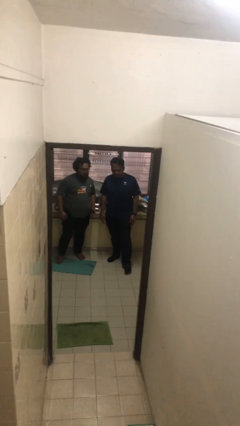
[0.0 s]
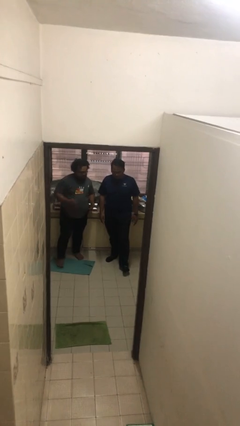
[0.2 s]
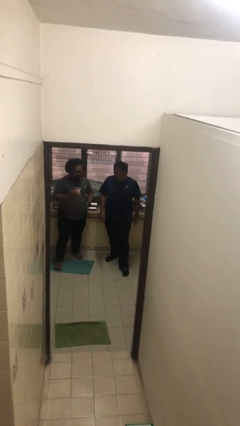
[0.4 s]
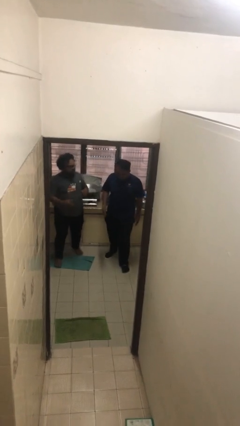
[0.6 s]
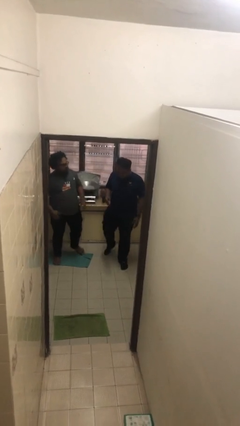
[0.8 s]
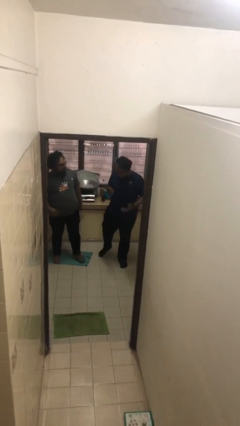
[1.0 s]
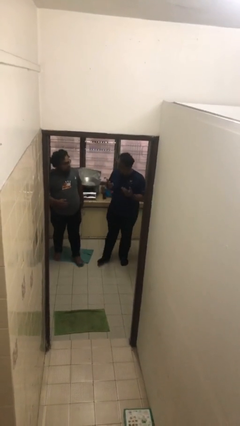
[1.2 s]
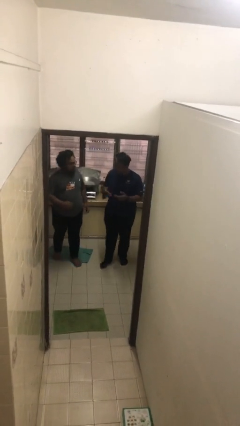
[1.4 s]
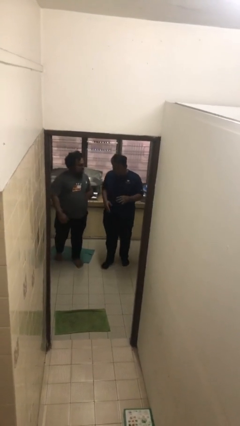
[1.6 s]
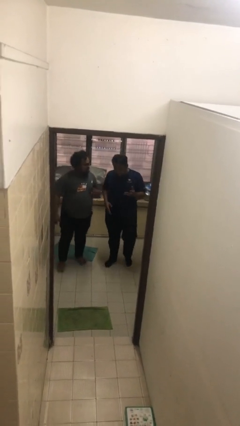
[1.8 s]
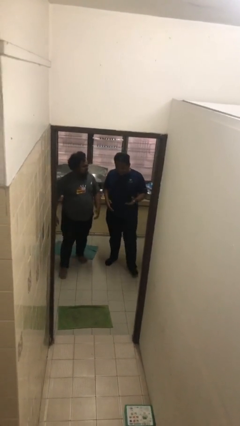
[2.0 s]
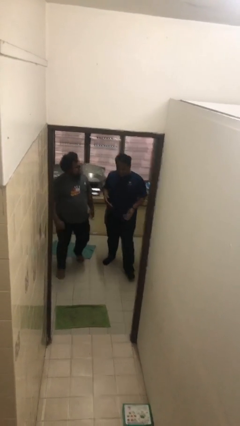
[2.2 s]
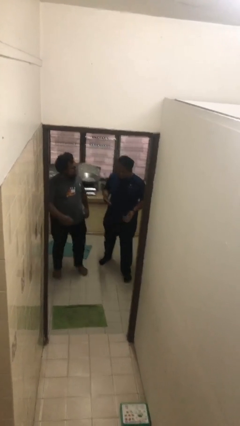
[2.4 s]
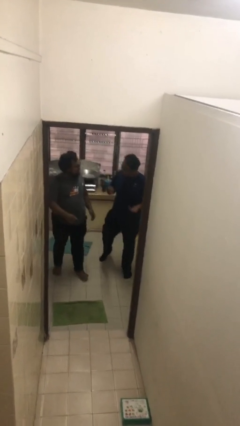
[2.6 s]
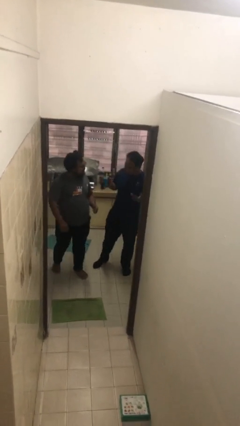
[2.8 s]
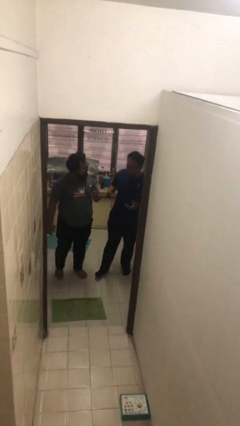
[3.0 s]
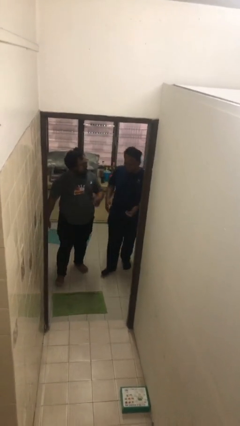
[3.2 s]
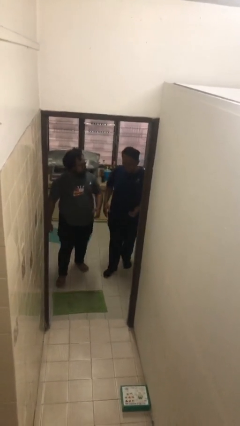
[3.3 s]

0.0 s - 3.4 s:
person talks to person

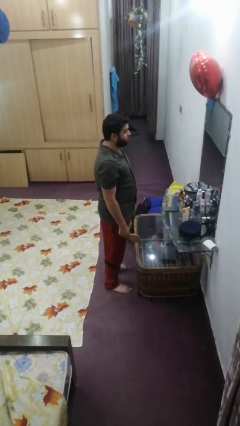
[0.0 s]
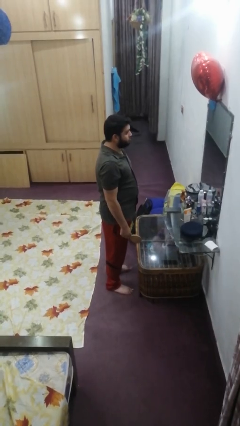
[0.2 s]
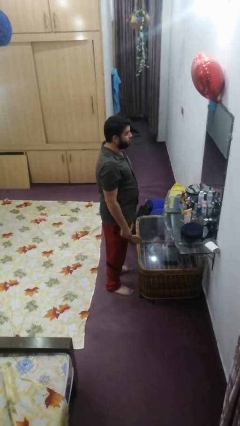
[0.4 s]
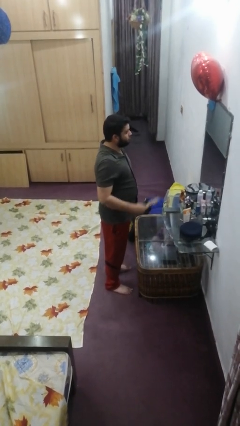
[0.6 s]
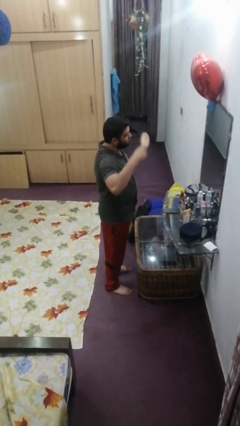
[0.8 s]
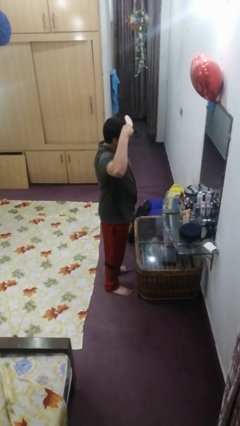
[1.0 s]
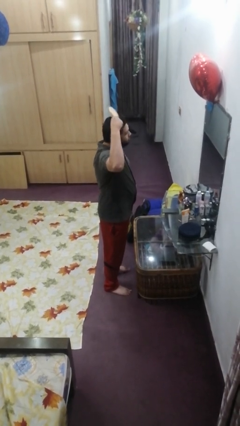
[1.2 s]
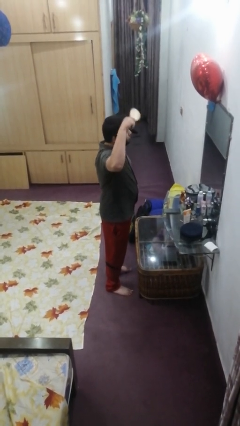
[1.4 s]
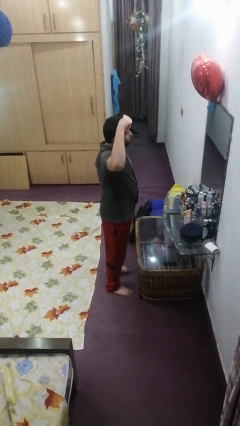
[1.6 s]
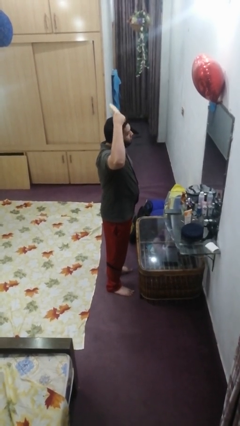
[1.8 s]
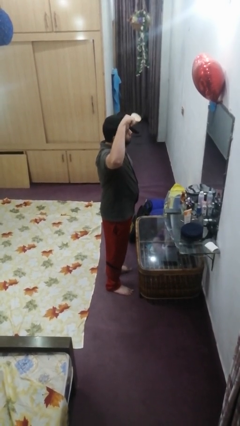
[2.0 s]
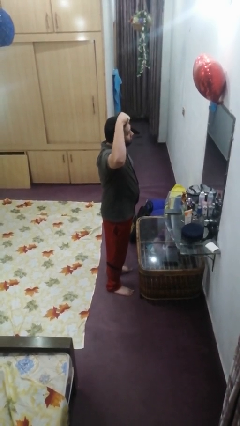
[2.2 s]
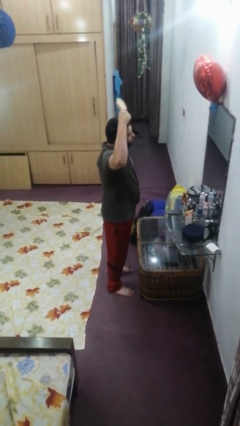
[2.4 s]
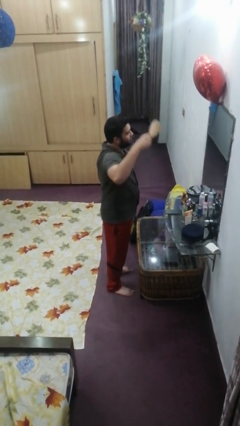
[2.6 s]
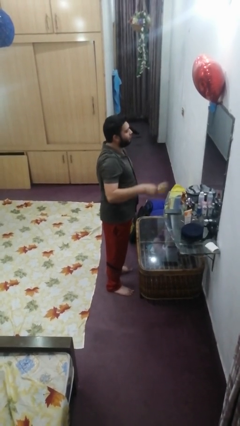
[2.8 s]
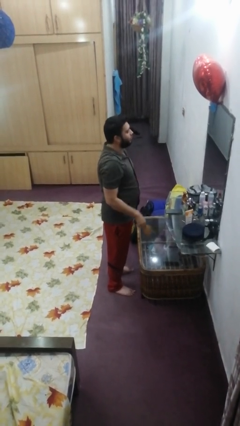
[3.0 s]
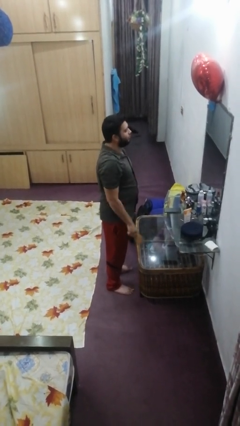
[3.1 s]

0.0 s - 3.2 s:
person brushes hair

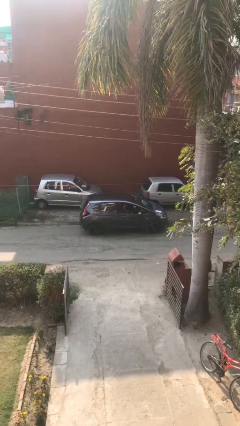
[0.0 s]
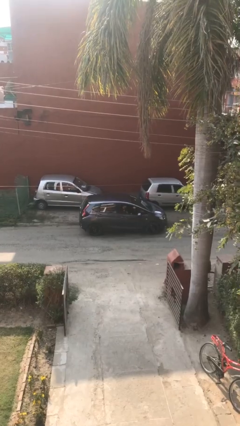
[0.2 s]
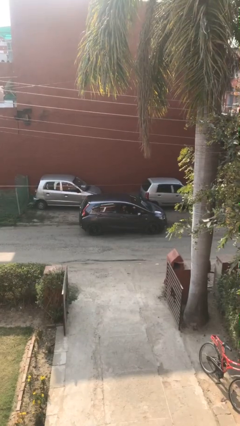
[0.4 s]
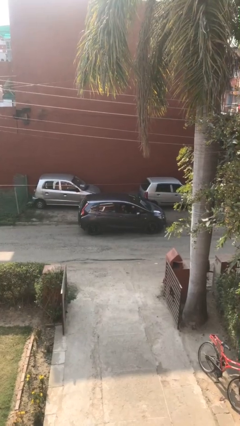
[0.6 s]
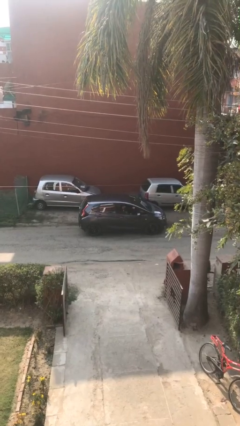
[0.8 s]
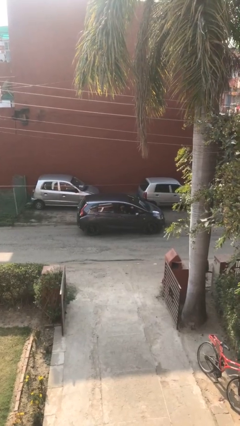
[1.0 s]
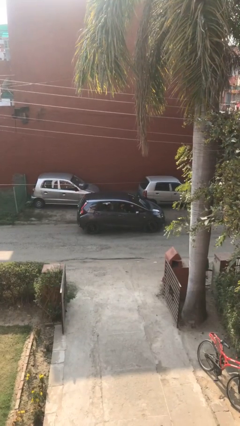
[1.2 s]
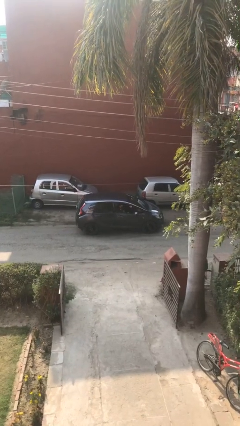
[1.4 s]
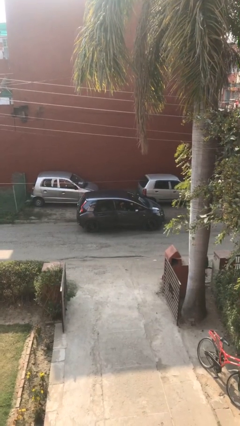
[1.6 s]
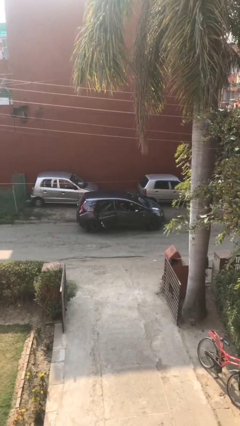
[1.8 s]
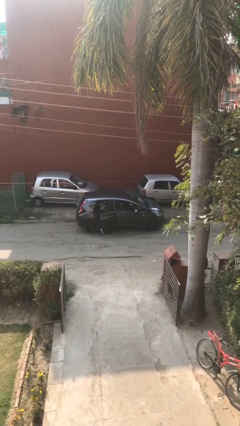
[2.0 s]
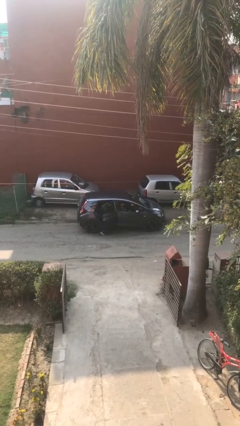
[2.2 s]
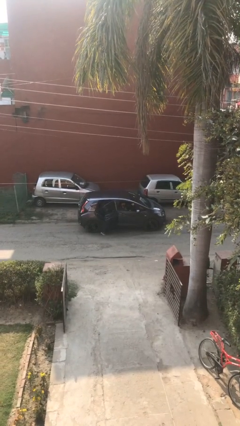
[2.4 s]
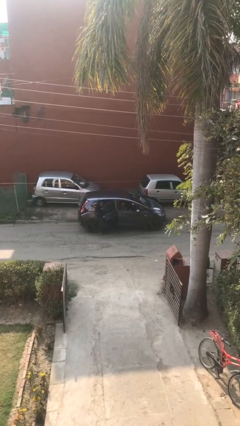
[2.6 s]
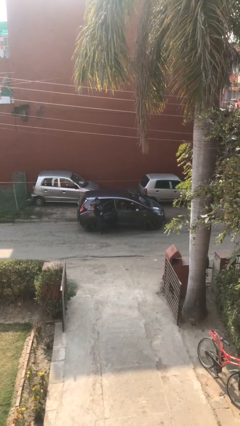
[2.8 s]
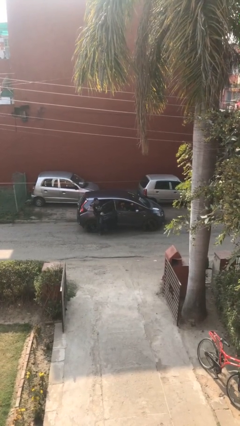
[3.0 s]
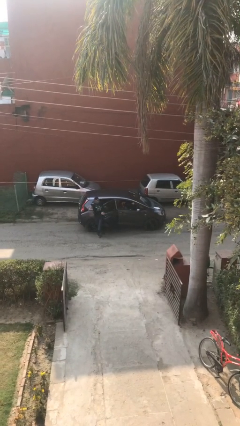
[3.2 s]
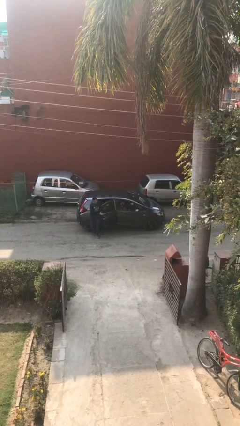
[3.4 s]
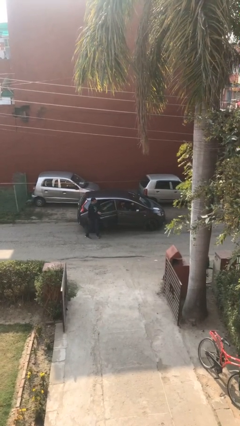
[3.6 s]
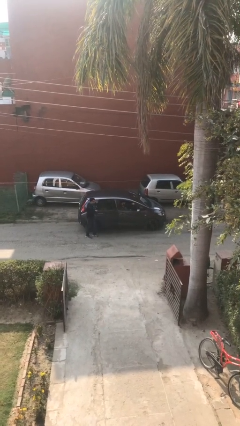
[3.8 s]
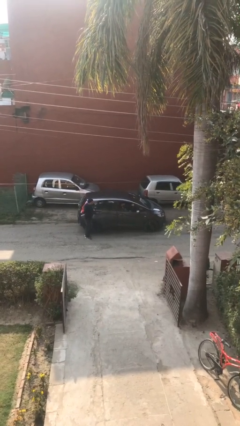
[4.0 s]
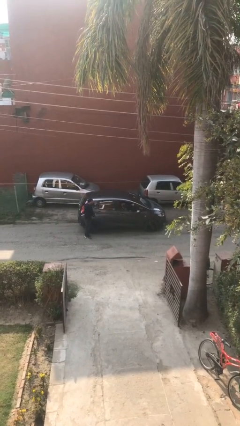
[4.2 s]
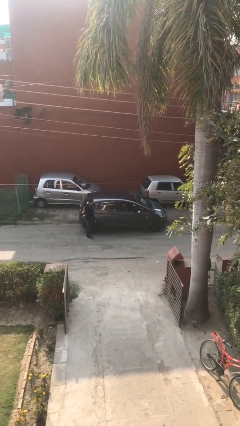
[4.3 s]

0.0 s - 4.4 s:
car drops off person

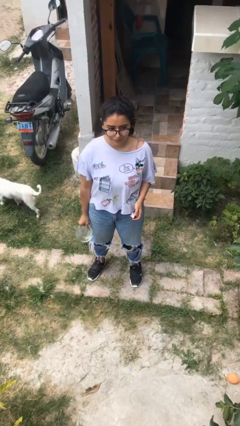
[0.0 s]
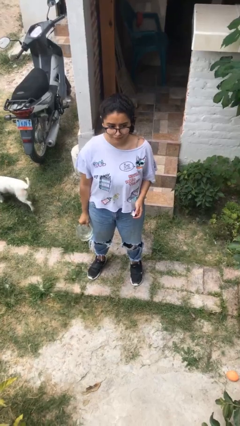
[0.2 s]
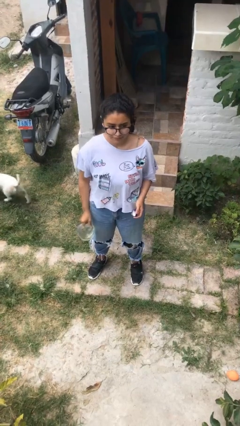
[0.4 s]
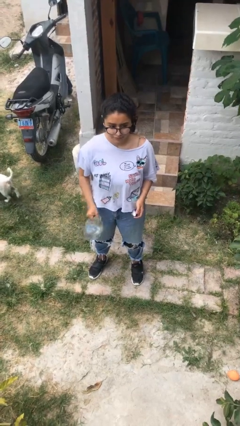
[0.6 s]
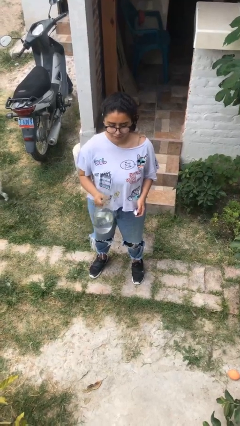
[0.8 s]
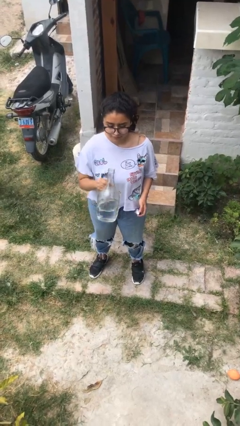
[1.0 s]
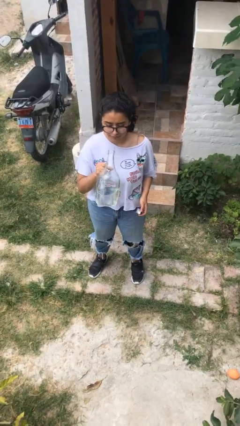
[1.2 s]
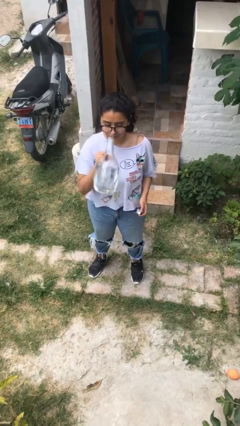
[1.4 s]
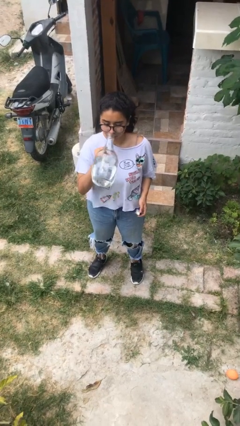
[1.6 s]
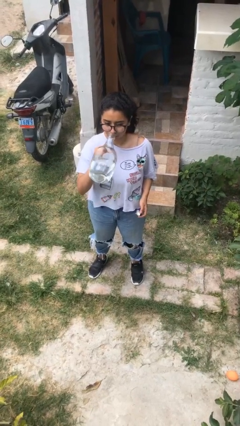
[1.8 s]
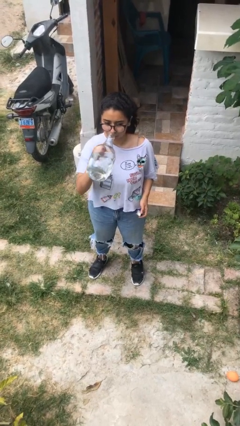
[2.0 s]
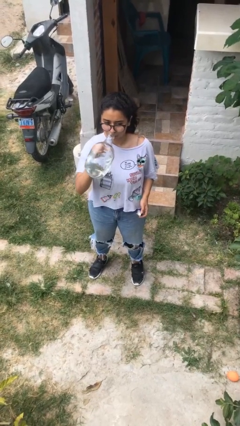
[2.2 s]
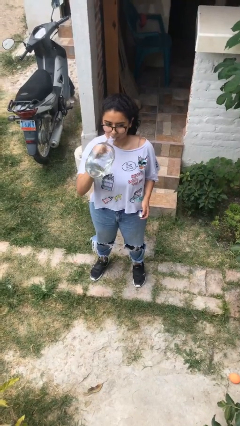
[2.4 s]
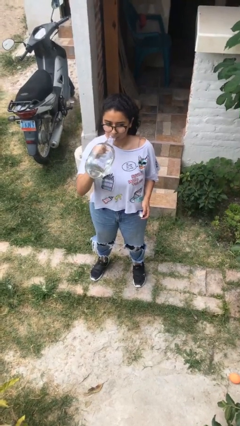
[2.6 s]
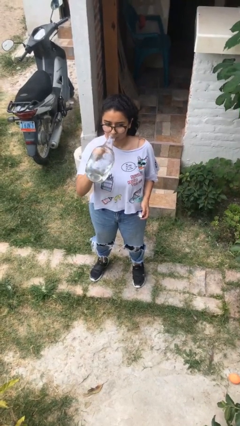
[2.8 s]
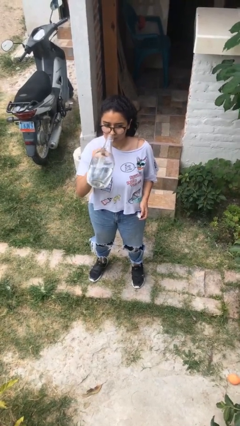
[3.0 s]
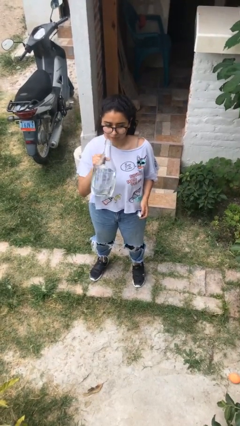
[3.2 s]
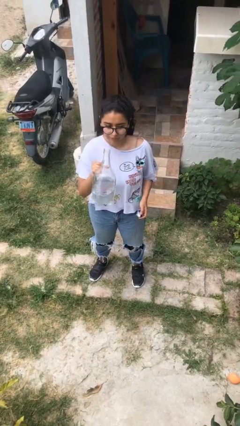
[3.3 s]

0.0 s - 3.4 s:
person drinks from bottle

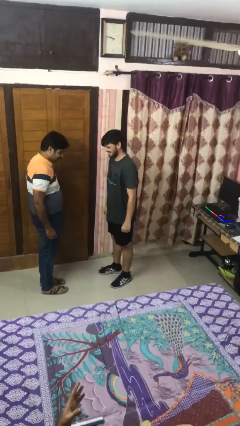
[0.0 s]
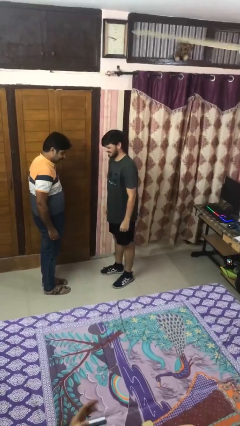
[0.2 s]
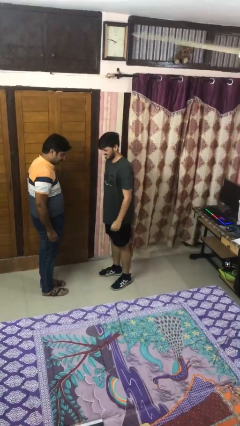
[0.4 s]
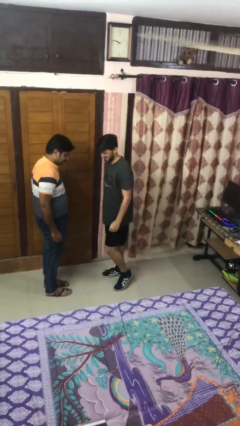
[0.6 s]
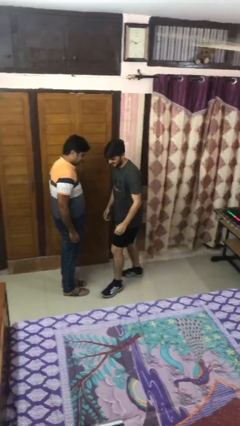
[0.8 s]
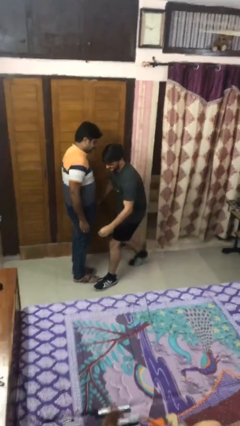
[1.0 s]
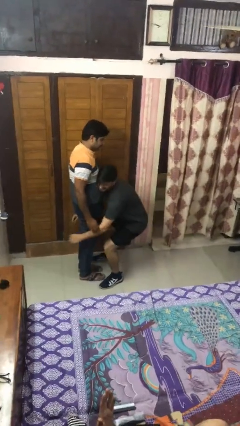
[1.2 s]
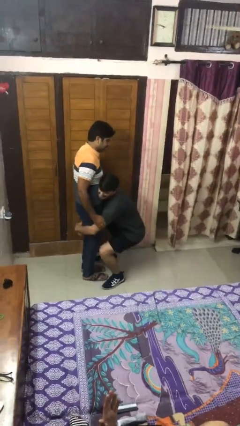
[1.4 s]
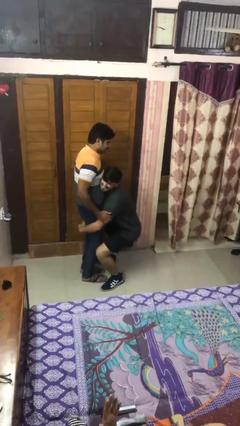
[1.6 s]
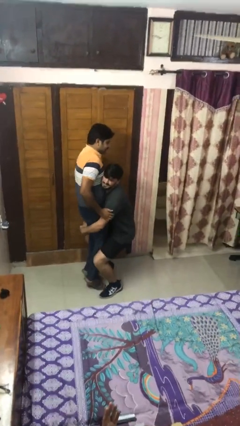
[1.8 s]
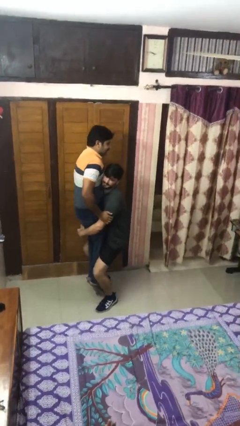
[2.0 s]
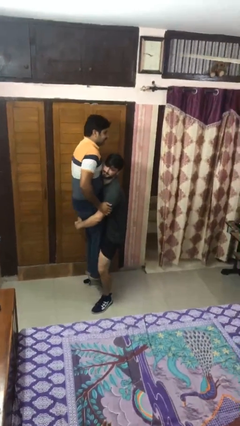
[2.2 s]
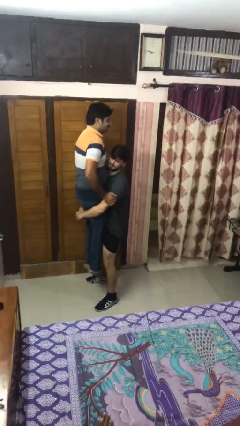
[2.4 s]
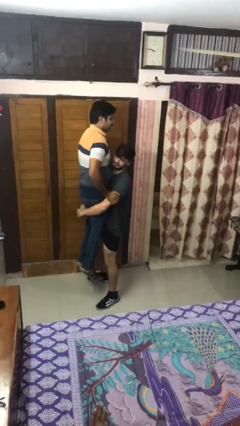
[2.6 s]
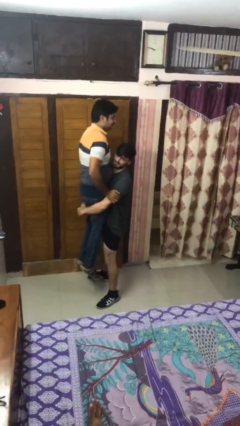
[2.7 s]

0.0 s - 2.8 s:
person picks up person

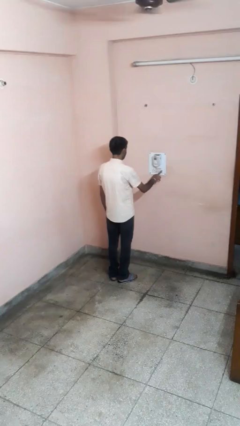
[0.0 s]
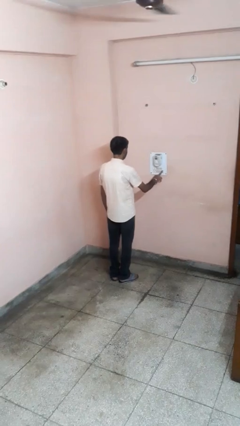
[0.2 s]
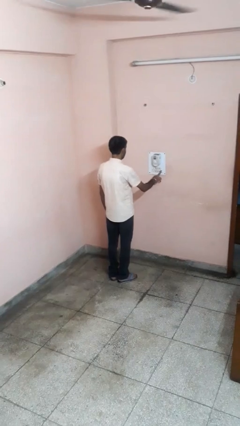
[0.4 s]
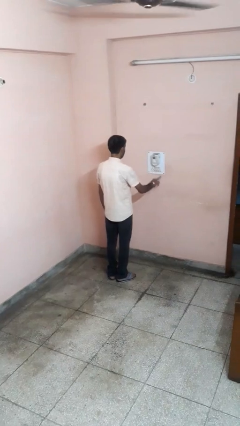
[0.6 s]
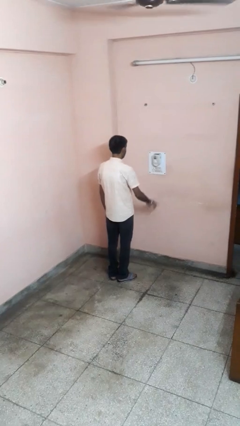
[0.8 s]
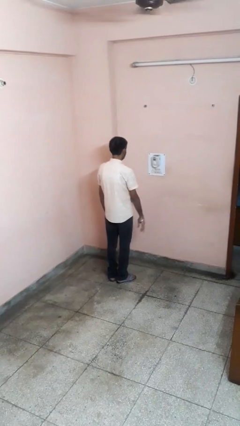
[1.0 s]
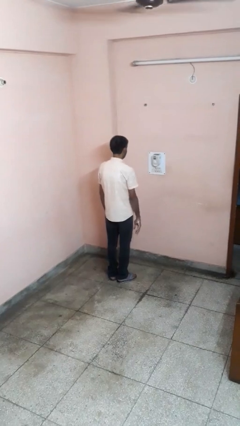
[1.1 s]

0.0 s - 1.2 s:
person turns on fan
